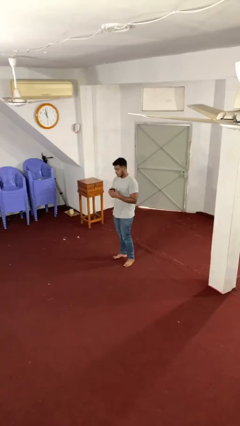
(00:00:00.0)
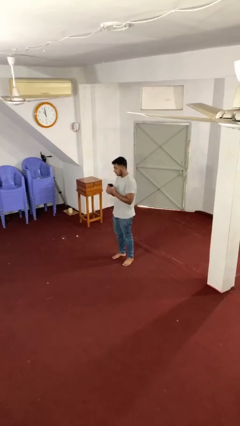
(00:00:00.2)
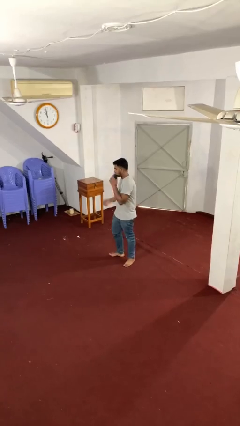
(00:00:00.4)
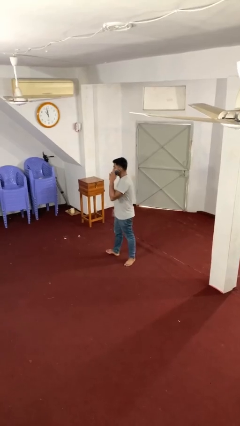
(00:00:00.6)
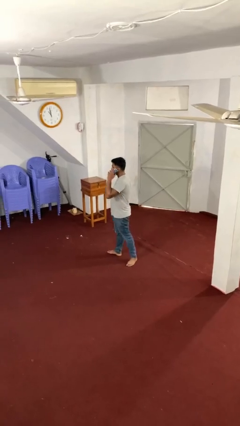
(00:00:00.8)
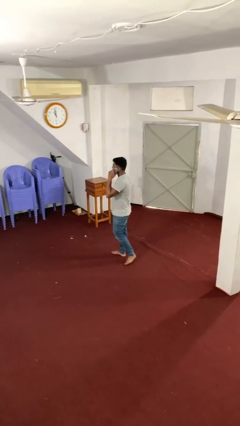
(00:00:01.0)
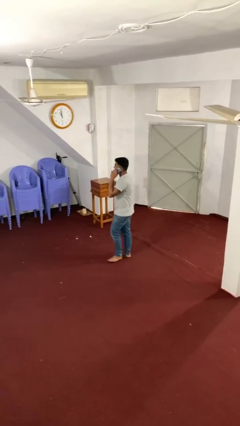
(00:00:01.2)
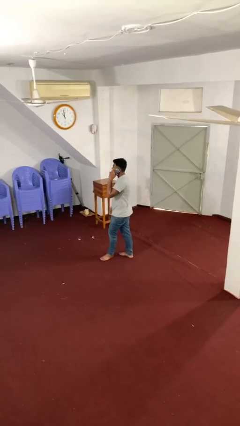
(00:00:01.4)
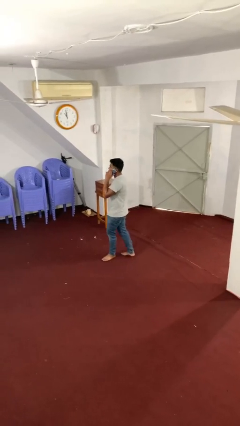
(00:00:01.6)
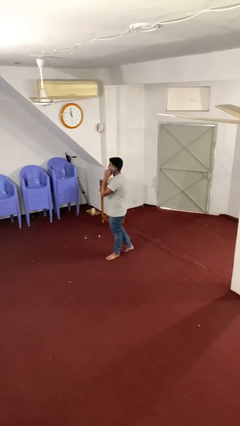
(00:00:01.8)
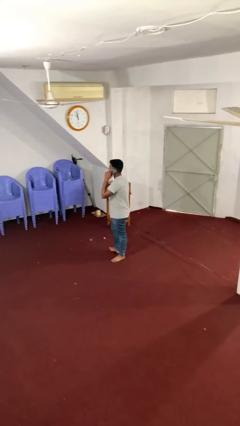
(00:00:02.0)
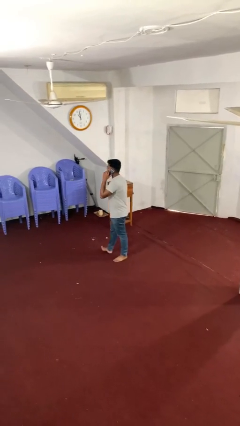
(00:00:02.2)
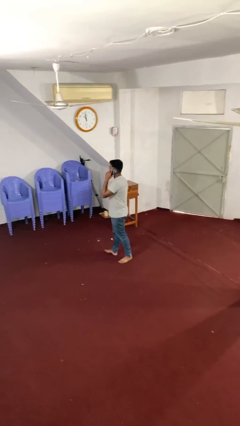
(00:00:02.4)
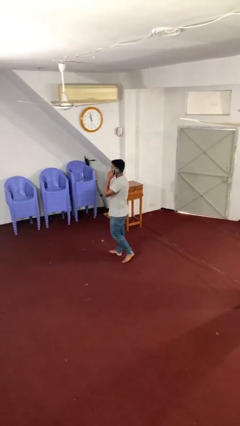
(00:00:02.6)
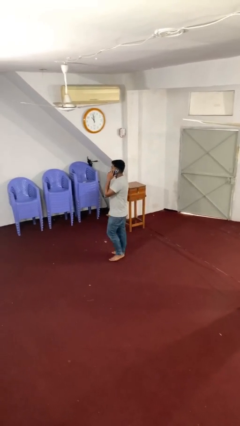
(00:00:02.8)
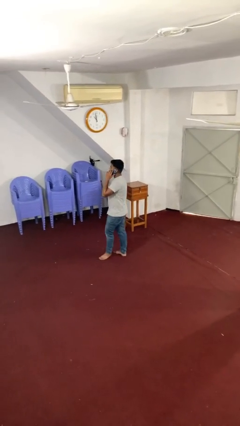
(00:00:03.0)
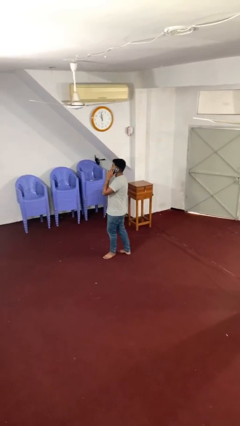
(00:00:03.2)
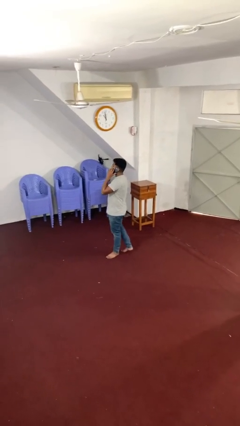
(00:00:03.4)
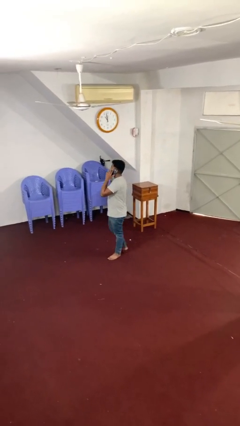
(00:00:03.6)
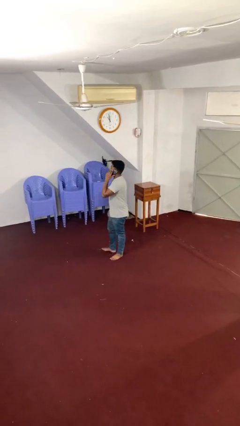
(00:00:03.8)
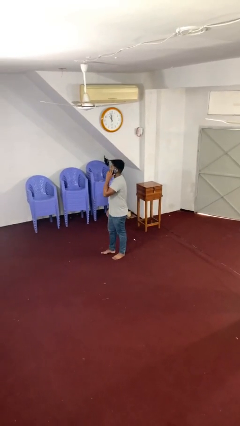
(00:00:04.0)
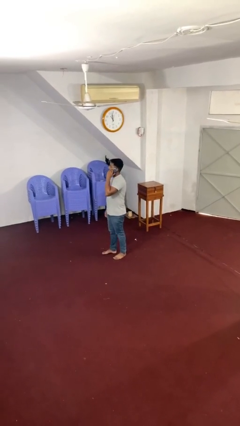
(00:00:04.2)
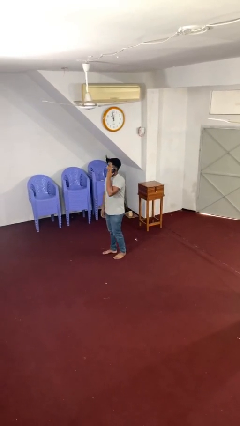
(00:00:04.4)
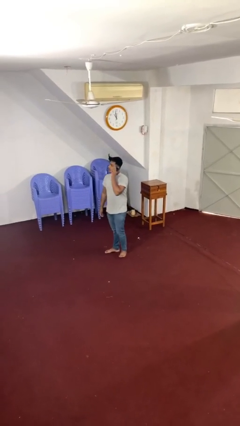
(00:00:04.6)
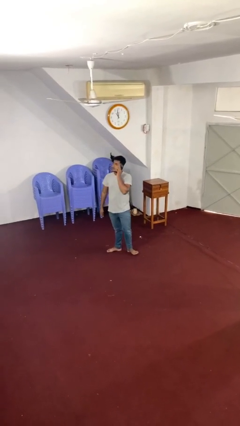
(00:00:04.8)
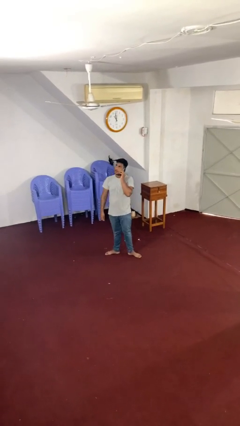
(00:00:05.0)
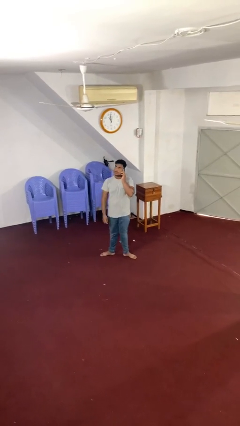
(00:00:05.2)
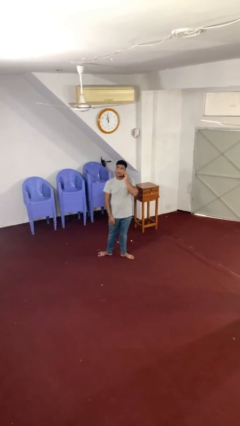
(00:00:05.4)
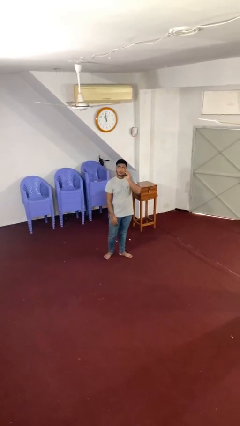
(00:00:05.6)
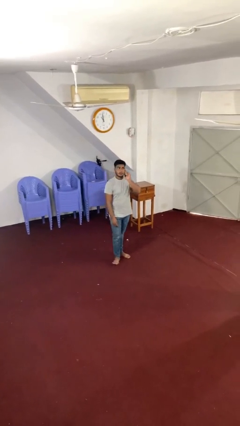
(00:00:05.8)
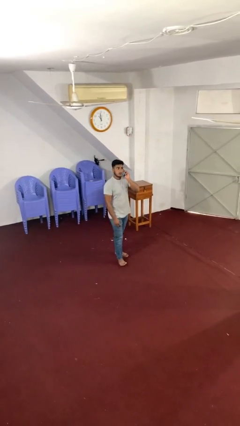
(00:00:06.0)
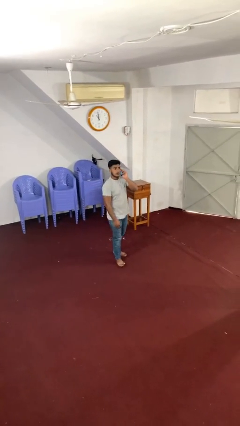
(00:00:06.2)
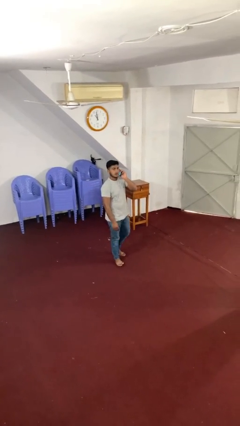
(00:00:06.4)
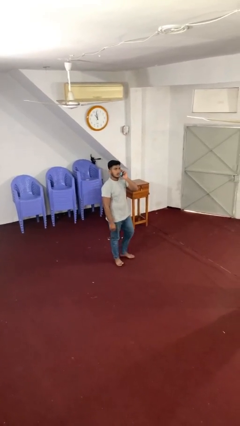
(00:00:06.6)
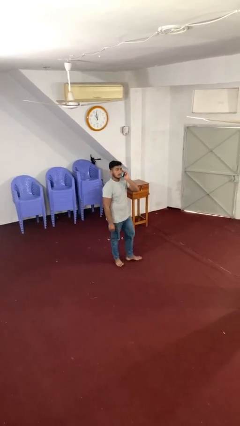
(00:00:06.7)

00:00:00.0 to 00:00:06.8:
person talks on phone

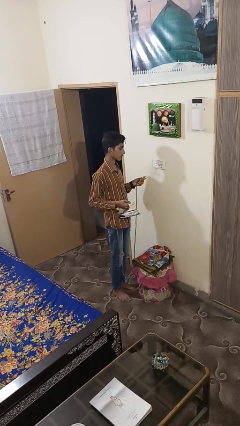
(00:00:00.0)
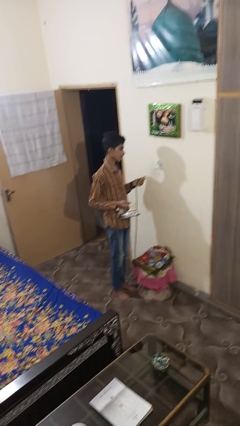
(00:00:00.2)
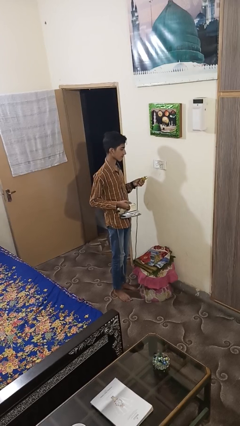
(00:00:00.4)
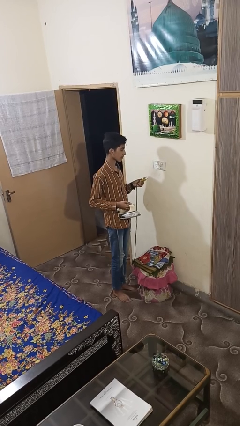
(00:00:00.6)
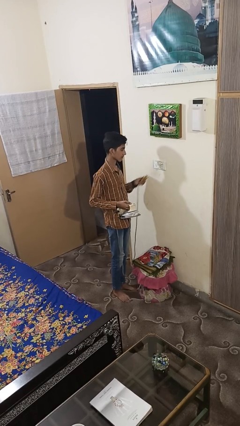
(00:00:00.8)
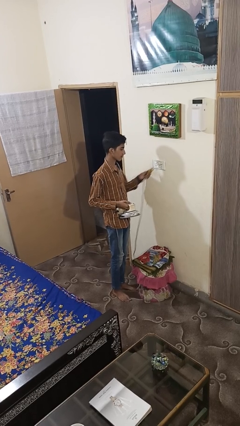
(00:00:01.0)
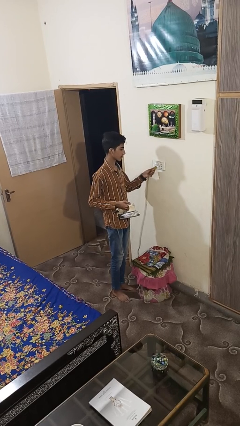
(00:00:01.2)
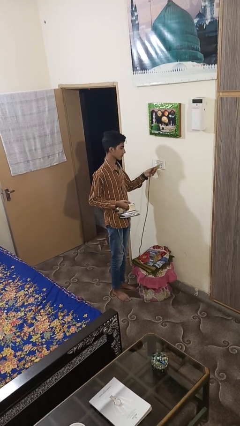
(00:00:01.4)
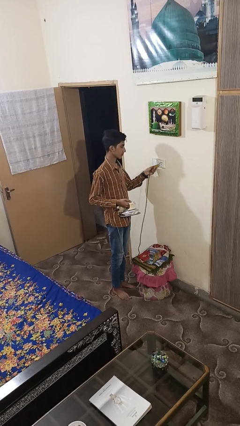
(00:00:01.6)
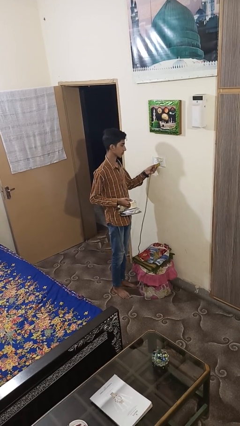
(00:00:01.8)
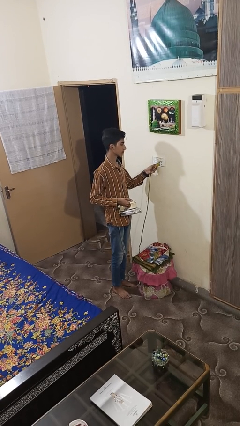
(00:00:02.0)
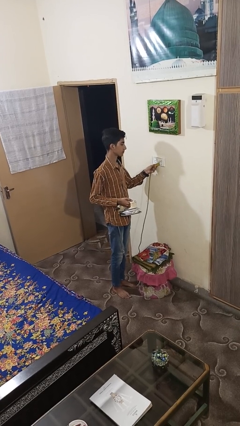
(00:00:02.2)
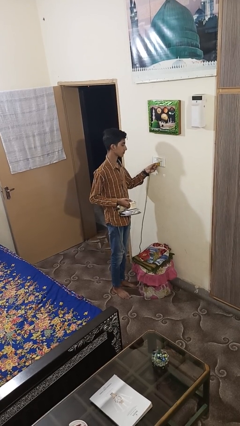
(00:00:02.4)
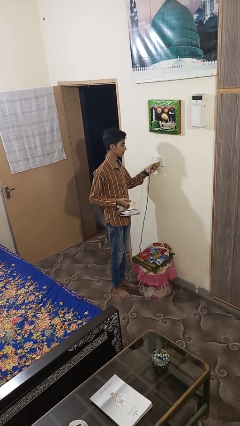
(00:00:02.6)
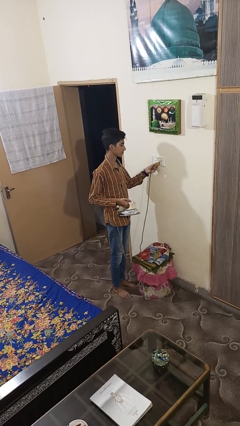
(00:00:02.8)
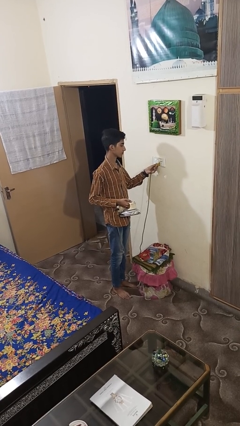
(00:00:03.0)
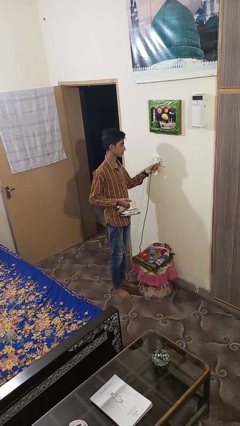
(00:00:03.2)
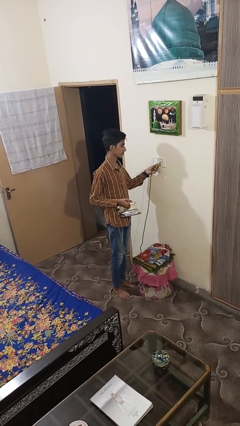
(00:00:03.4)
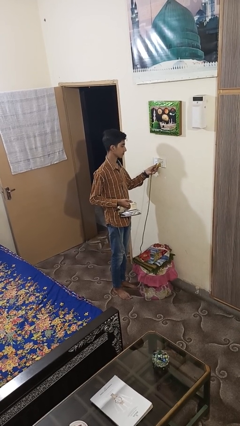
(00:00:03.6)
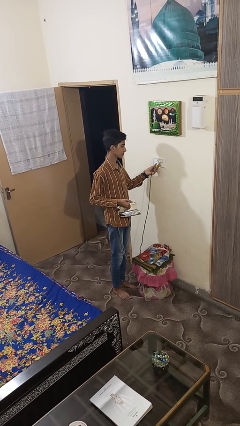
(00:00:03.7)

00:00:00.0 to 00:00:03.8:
person plugs into electrical socket

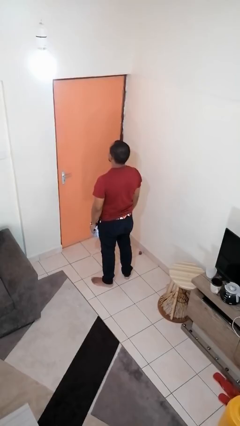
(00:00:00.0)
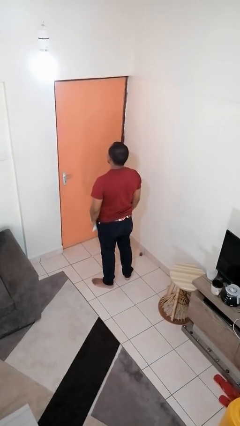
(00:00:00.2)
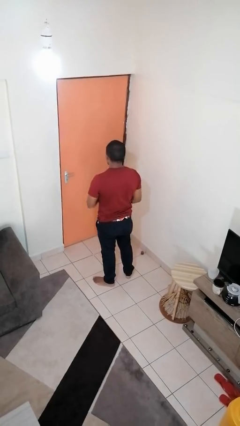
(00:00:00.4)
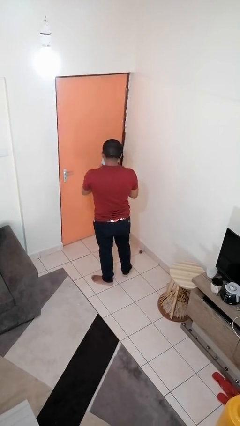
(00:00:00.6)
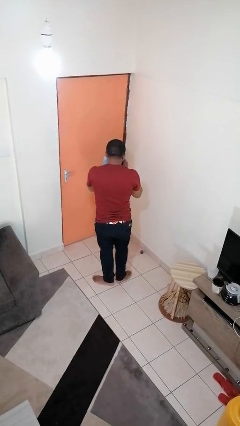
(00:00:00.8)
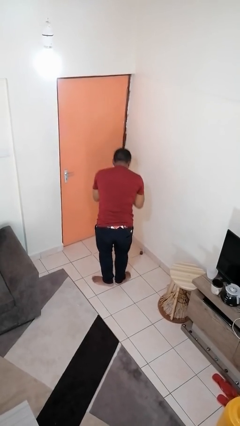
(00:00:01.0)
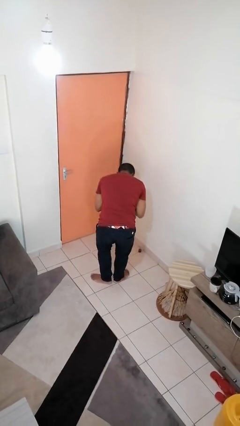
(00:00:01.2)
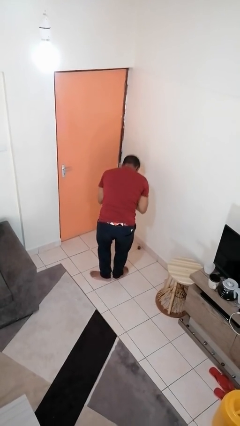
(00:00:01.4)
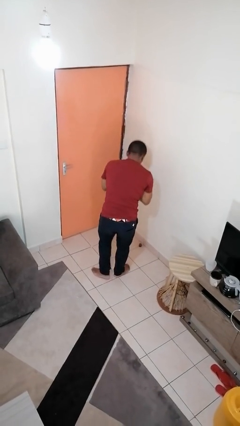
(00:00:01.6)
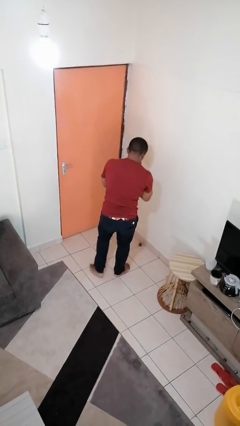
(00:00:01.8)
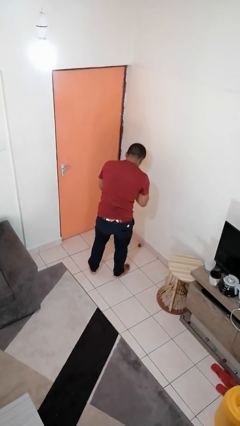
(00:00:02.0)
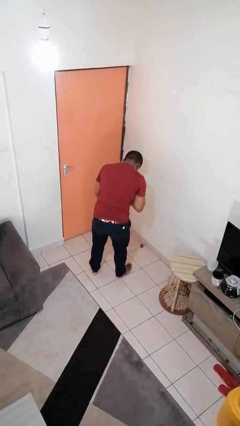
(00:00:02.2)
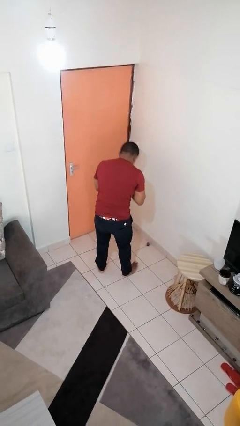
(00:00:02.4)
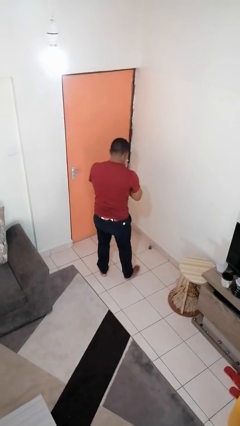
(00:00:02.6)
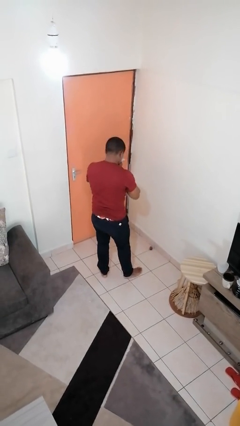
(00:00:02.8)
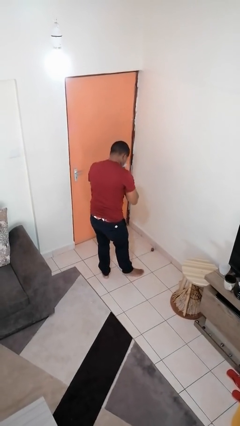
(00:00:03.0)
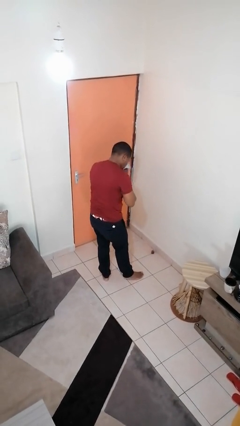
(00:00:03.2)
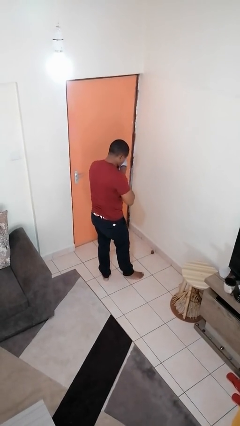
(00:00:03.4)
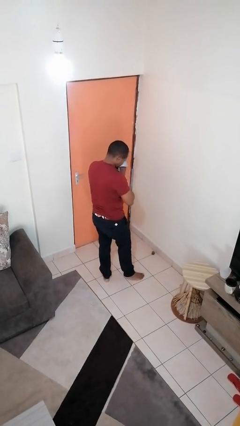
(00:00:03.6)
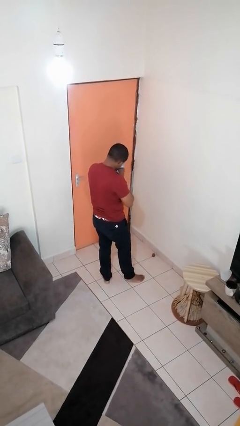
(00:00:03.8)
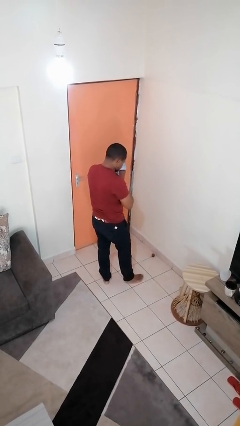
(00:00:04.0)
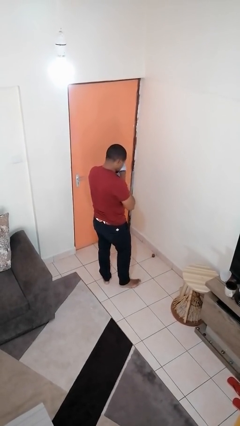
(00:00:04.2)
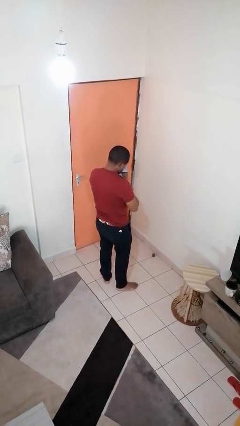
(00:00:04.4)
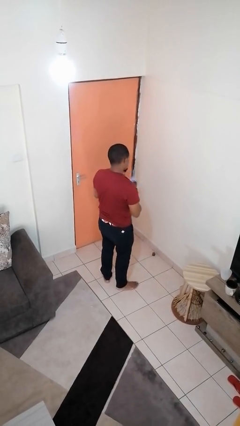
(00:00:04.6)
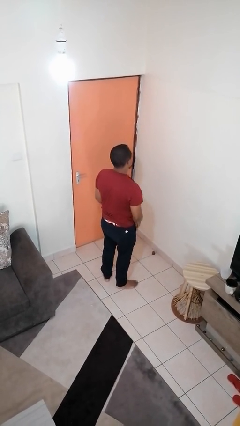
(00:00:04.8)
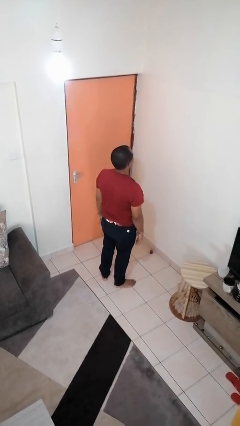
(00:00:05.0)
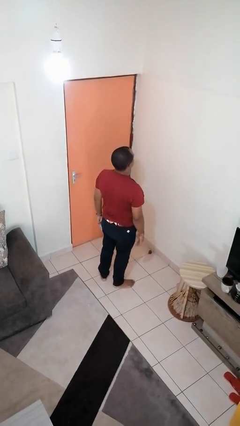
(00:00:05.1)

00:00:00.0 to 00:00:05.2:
person blows nose

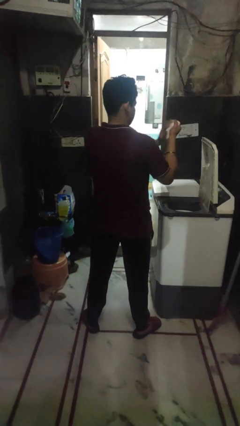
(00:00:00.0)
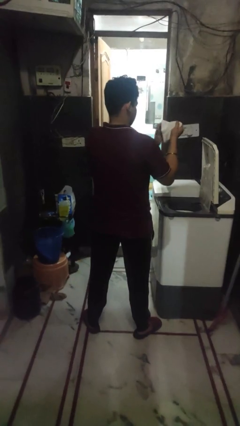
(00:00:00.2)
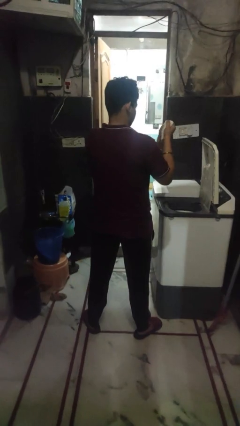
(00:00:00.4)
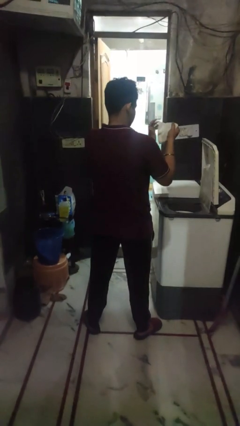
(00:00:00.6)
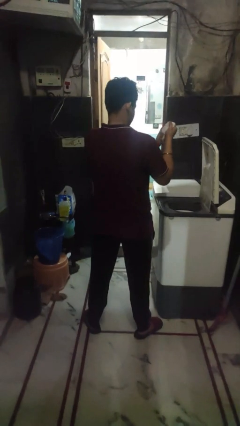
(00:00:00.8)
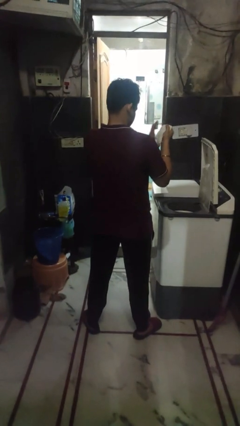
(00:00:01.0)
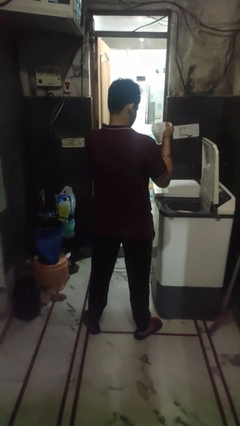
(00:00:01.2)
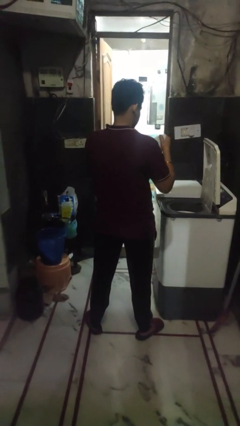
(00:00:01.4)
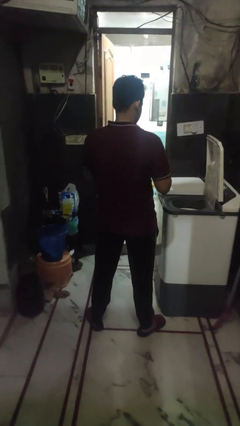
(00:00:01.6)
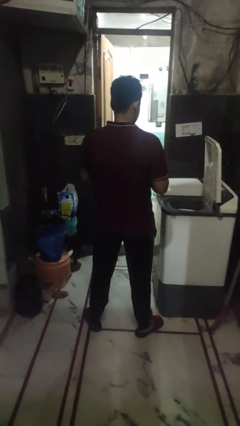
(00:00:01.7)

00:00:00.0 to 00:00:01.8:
person cleans dryer lint trap
